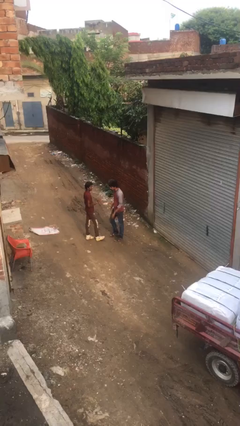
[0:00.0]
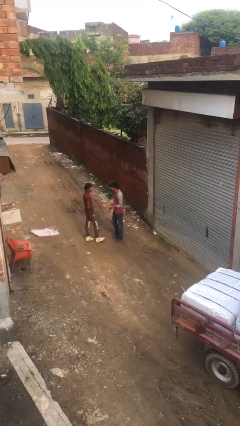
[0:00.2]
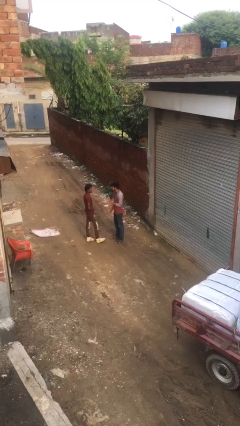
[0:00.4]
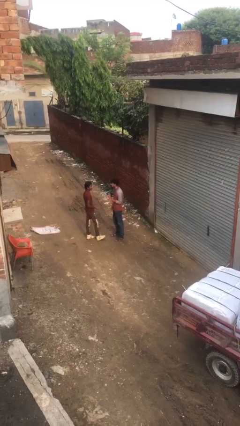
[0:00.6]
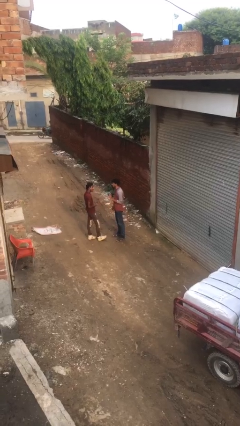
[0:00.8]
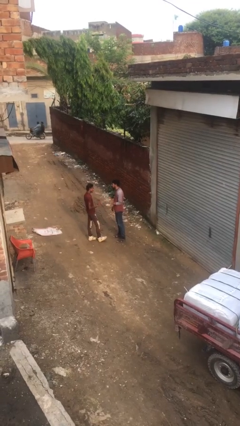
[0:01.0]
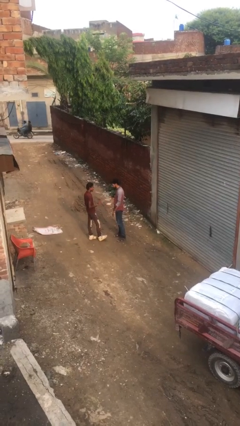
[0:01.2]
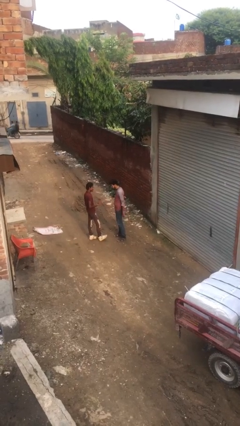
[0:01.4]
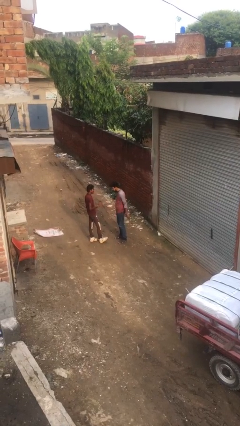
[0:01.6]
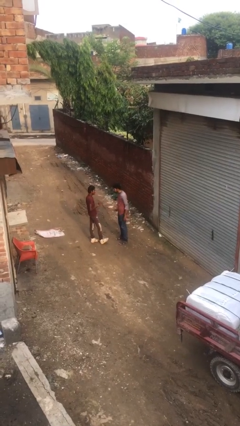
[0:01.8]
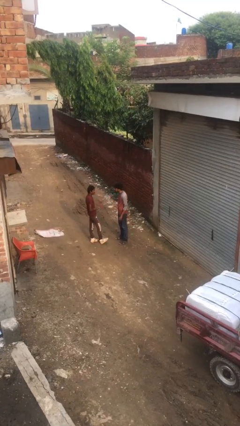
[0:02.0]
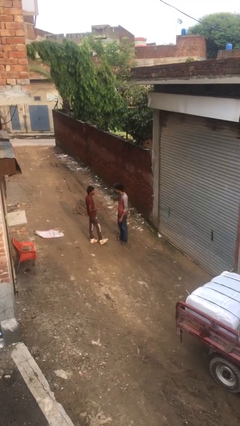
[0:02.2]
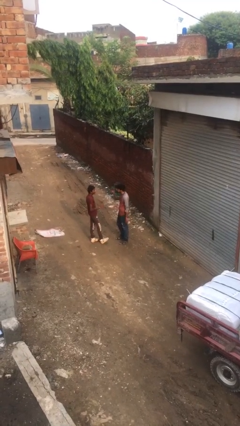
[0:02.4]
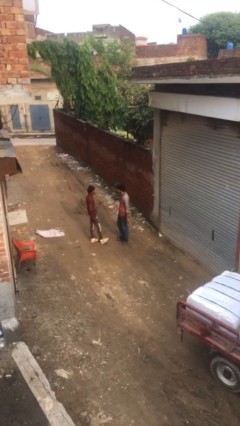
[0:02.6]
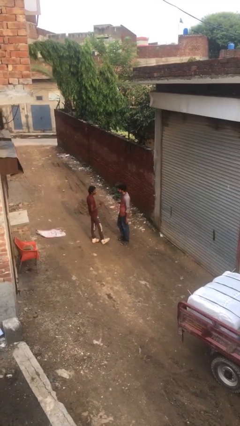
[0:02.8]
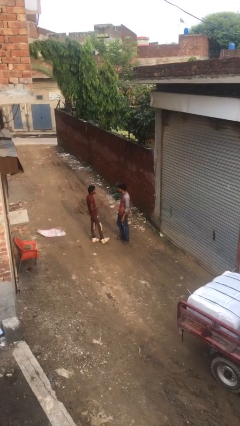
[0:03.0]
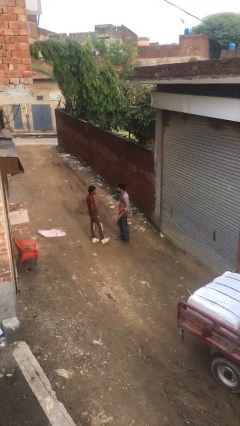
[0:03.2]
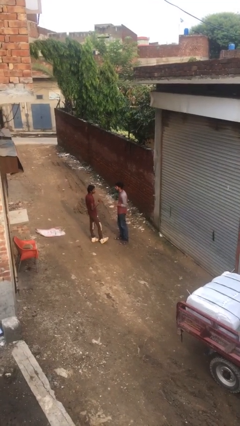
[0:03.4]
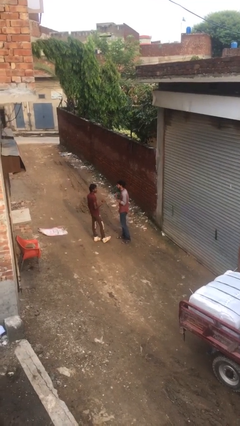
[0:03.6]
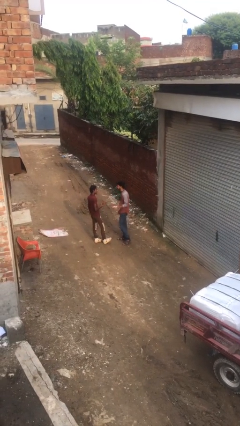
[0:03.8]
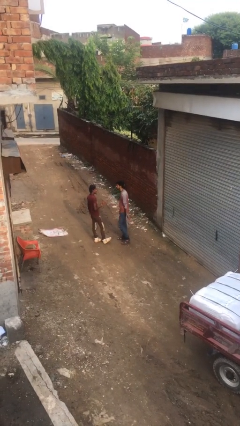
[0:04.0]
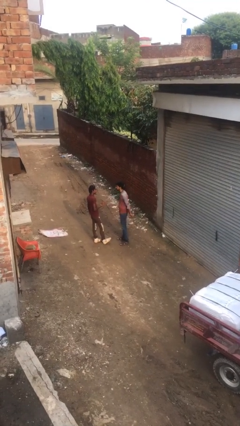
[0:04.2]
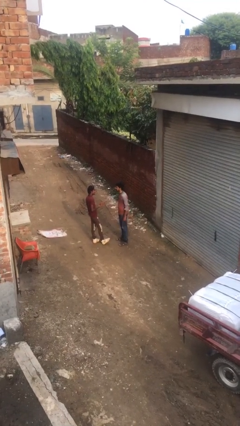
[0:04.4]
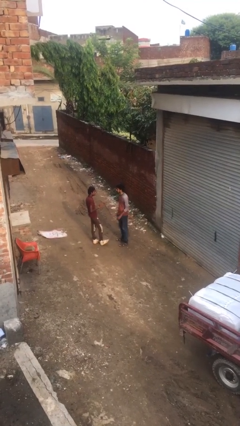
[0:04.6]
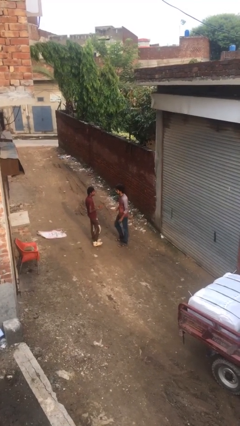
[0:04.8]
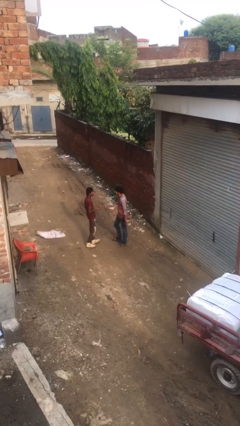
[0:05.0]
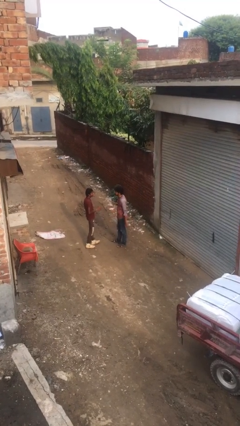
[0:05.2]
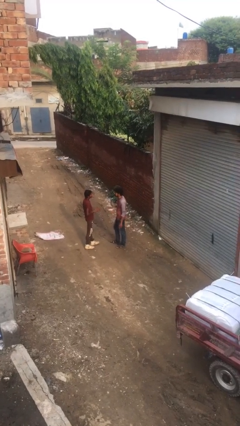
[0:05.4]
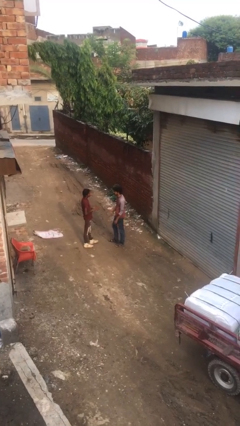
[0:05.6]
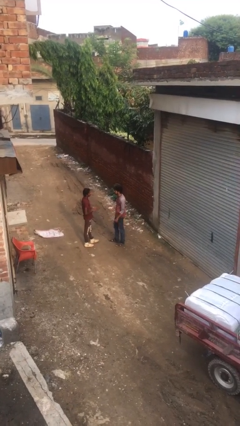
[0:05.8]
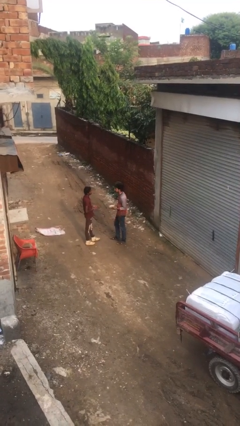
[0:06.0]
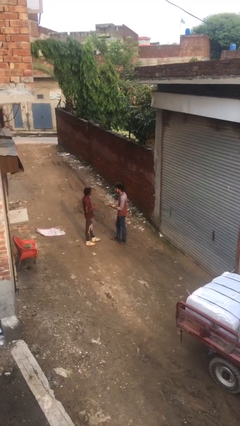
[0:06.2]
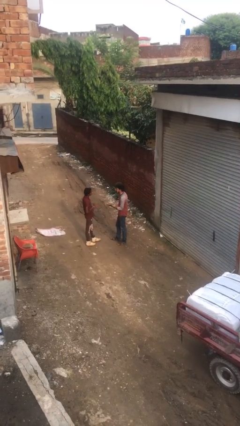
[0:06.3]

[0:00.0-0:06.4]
person talks to person

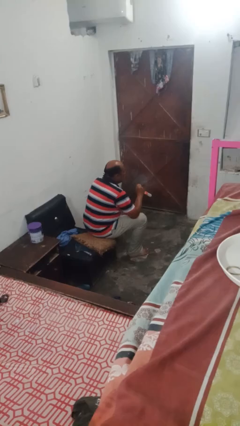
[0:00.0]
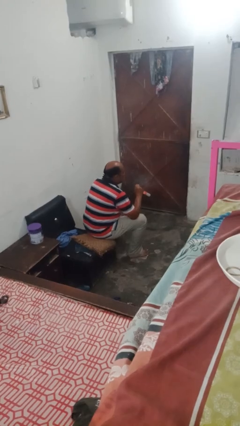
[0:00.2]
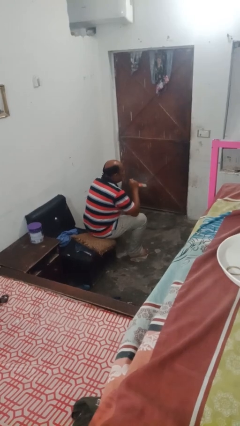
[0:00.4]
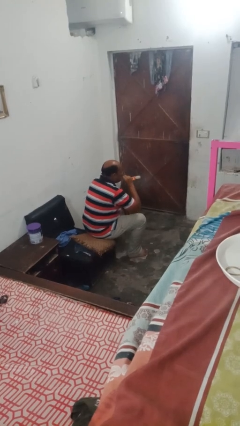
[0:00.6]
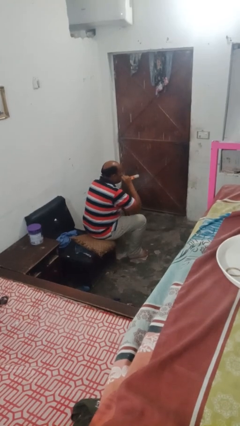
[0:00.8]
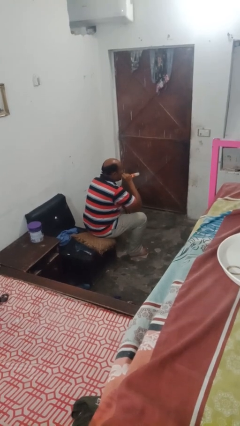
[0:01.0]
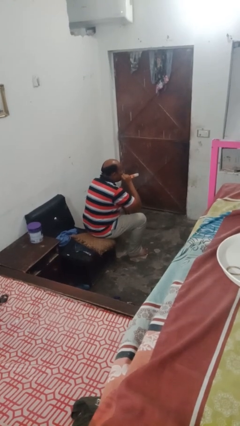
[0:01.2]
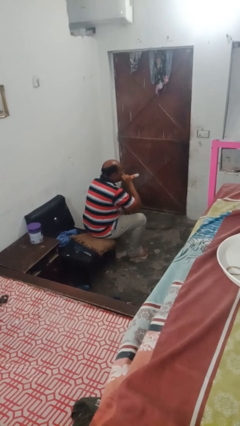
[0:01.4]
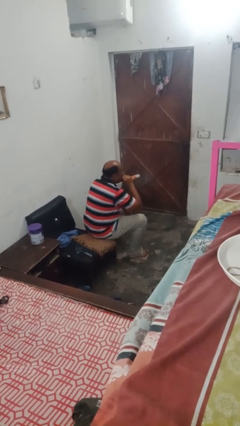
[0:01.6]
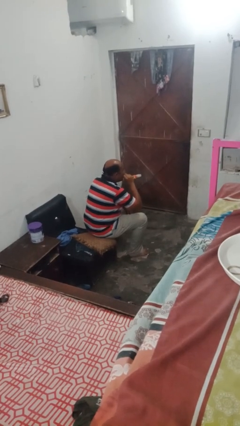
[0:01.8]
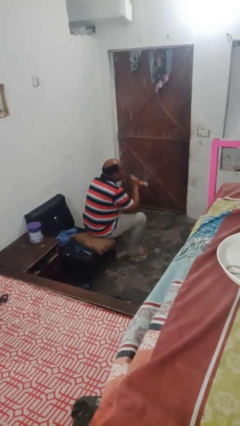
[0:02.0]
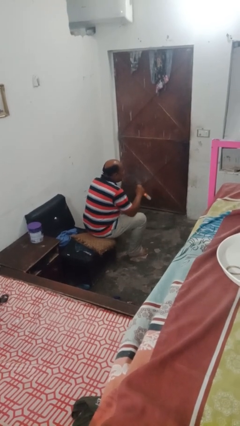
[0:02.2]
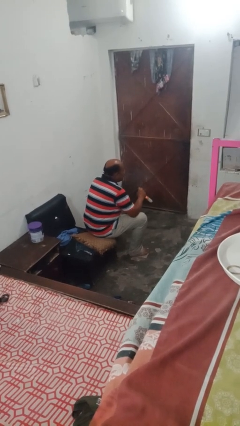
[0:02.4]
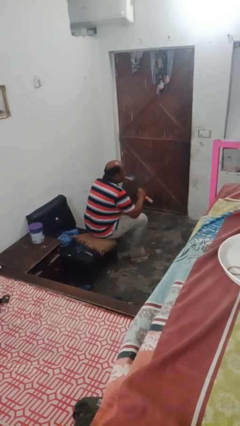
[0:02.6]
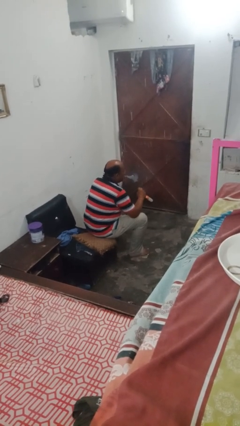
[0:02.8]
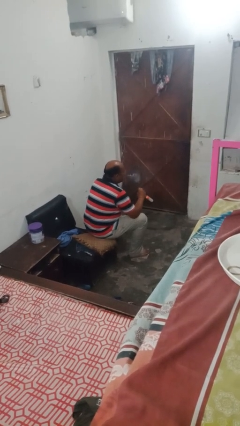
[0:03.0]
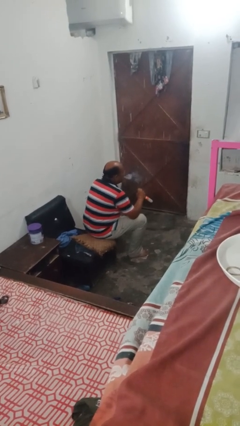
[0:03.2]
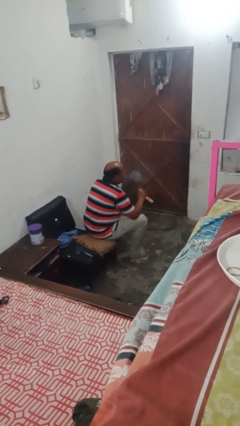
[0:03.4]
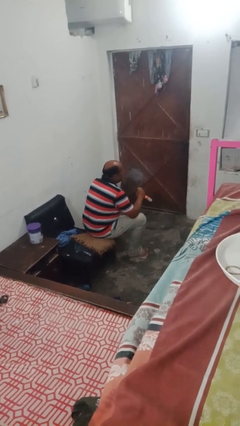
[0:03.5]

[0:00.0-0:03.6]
person vapes

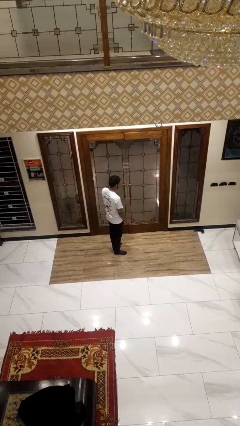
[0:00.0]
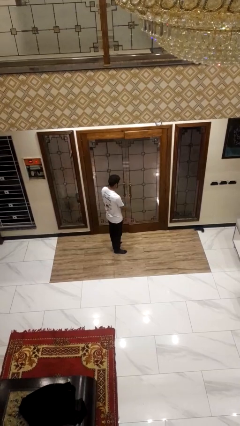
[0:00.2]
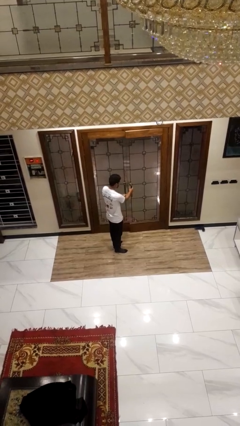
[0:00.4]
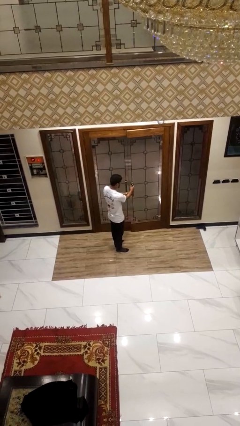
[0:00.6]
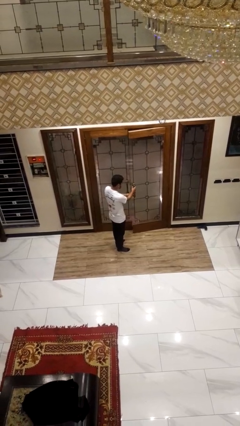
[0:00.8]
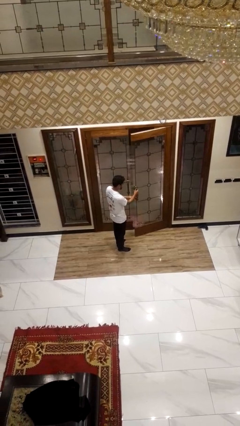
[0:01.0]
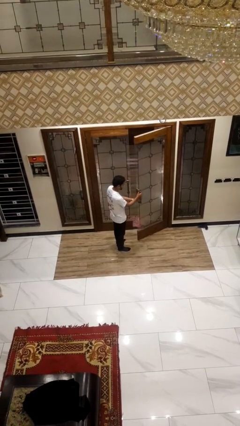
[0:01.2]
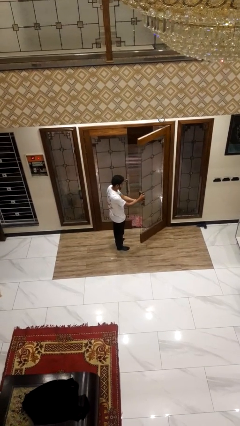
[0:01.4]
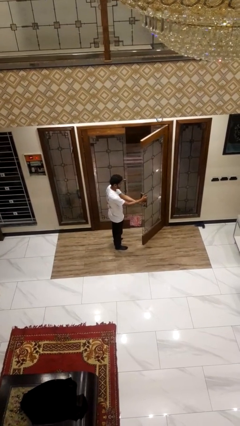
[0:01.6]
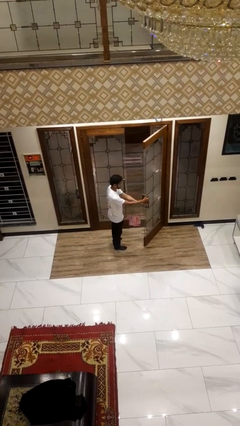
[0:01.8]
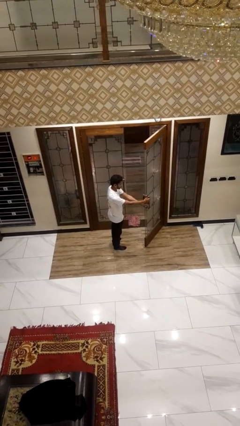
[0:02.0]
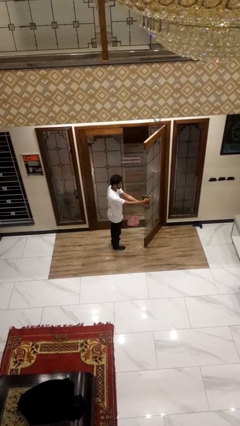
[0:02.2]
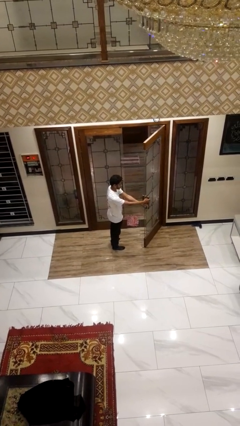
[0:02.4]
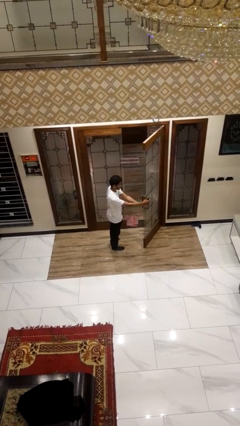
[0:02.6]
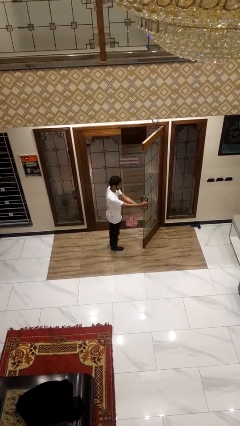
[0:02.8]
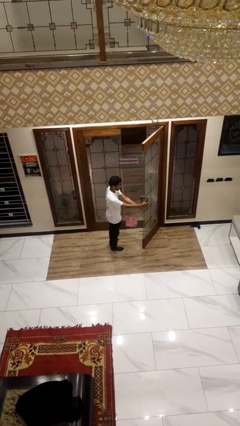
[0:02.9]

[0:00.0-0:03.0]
person opens facility door

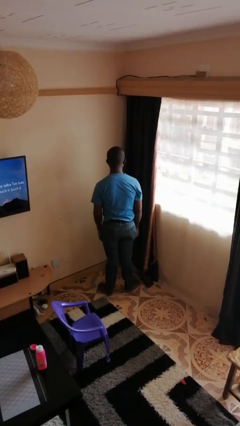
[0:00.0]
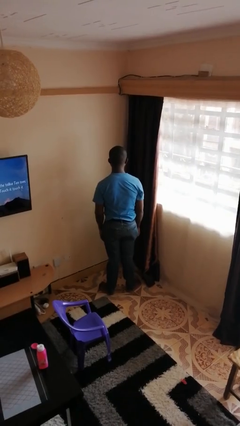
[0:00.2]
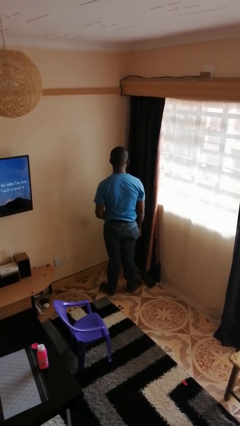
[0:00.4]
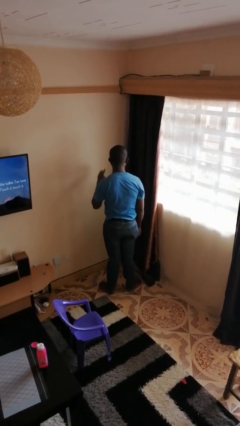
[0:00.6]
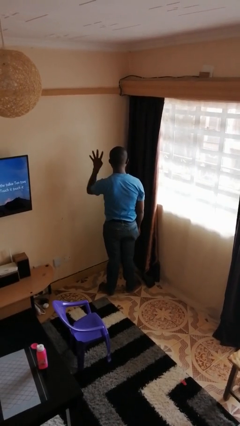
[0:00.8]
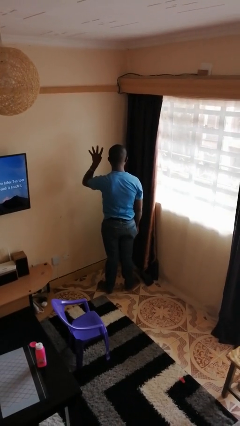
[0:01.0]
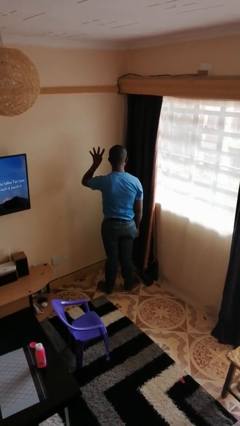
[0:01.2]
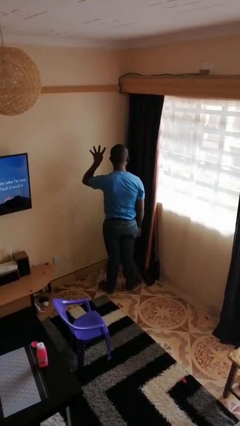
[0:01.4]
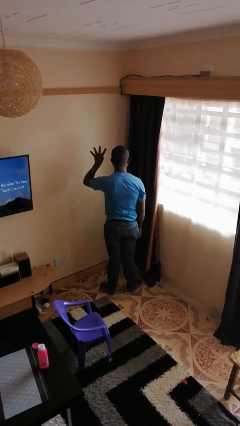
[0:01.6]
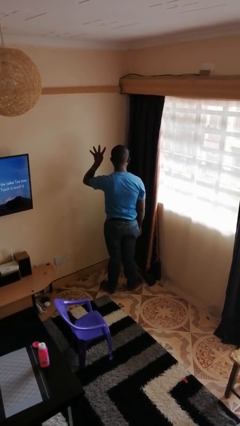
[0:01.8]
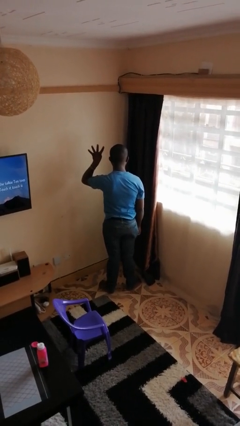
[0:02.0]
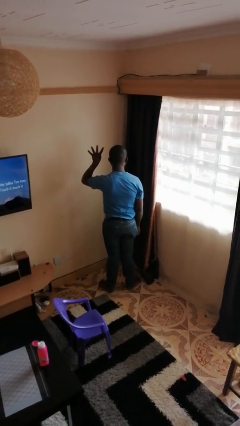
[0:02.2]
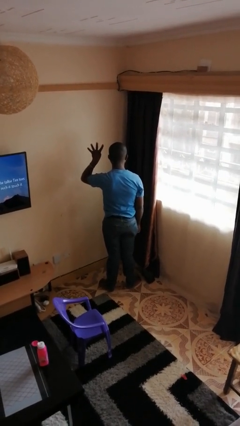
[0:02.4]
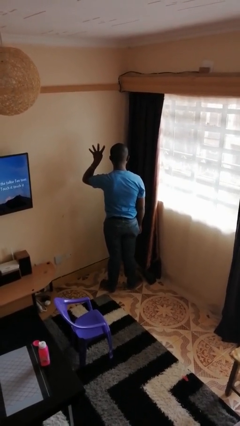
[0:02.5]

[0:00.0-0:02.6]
person gestures number four

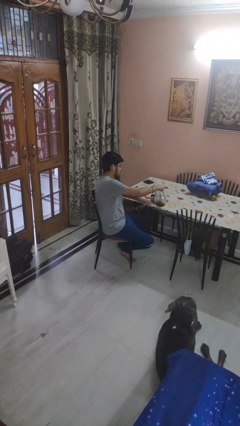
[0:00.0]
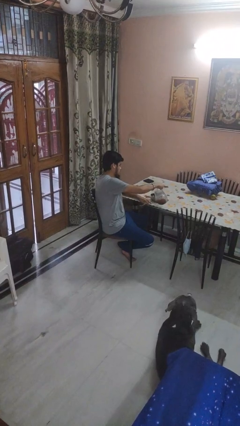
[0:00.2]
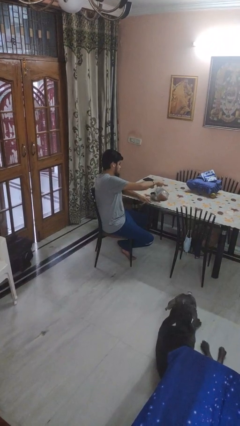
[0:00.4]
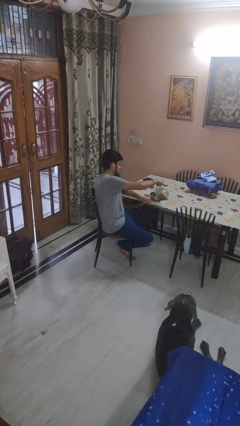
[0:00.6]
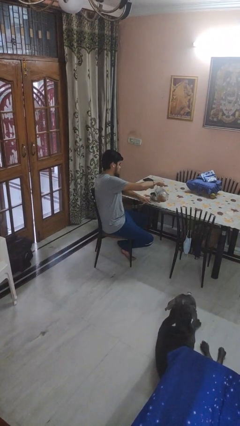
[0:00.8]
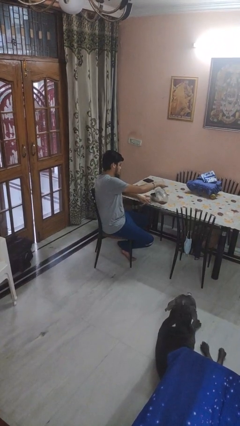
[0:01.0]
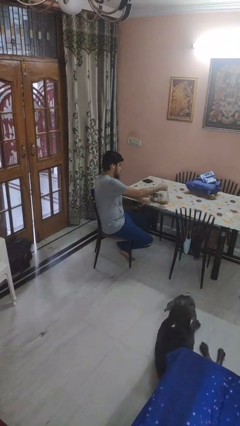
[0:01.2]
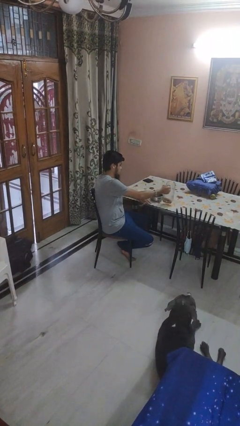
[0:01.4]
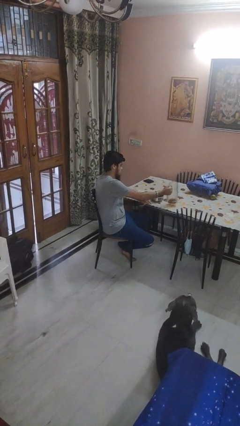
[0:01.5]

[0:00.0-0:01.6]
person pours into bowl

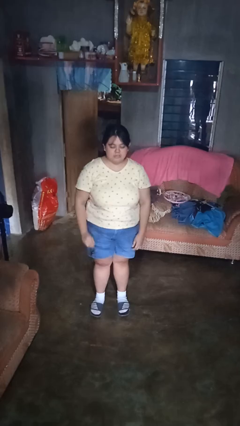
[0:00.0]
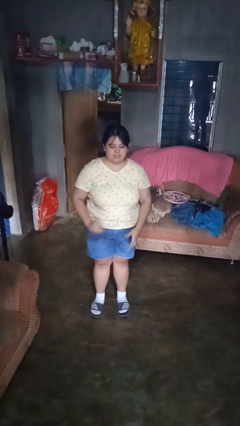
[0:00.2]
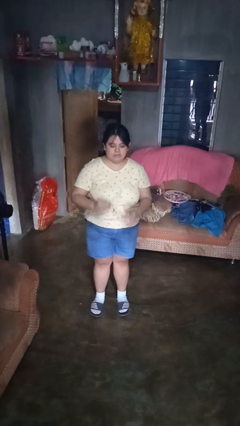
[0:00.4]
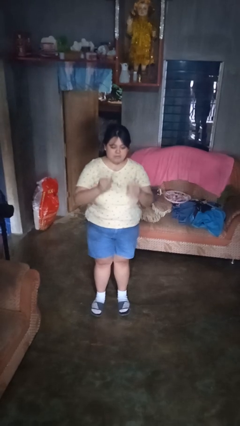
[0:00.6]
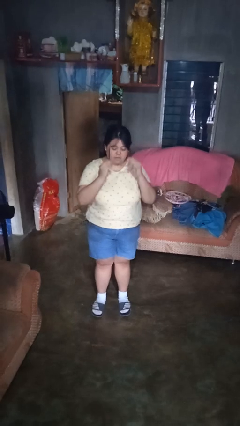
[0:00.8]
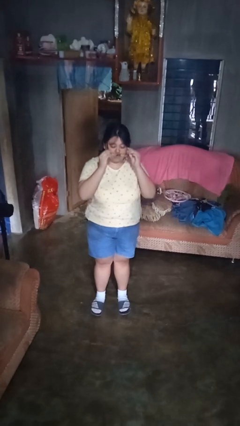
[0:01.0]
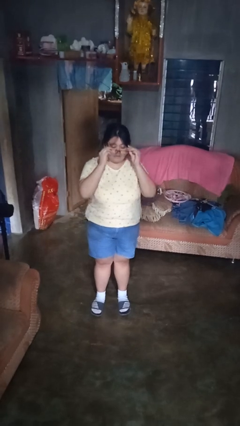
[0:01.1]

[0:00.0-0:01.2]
person puts on glasses
